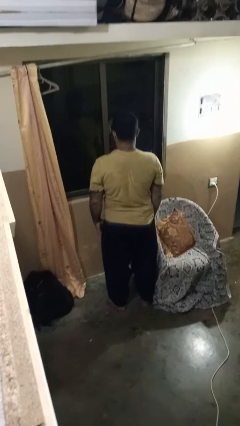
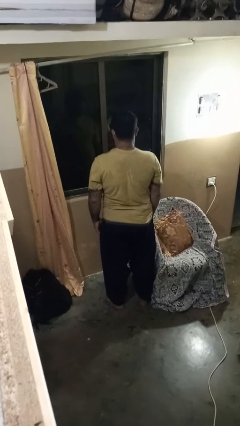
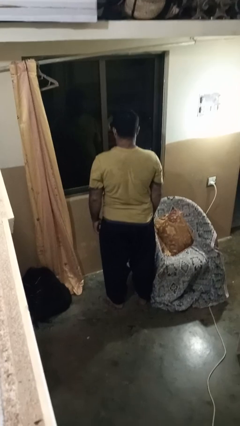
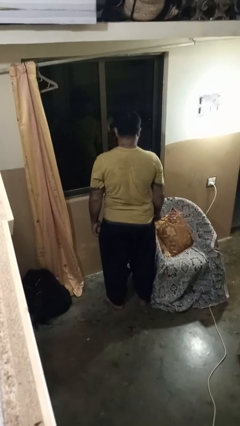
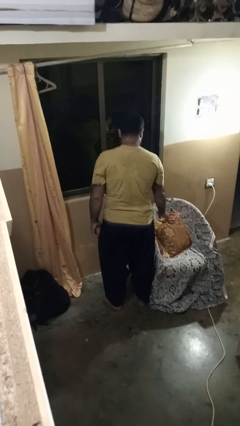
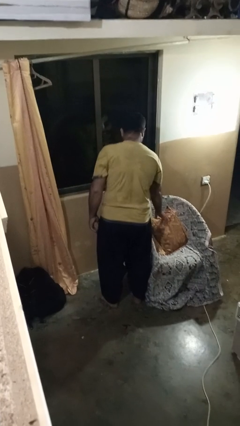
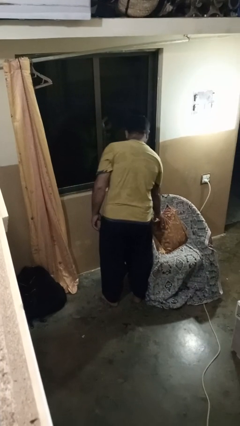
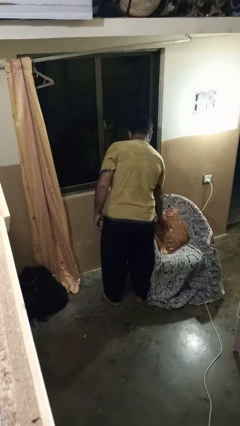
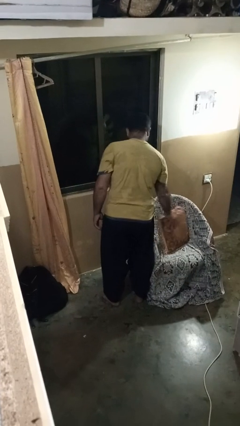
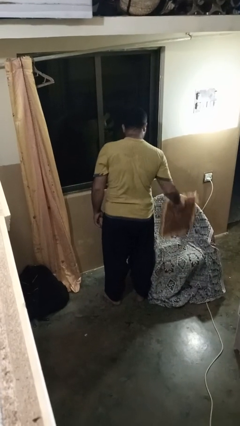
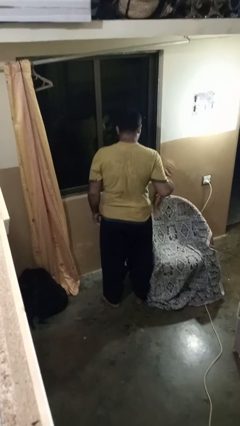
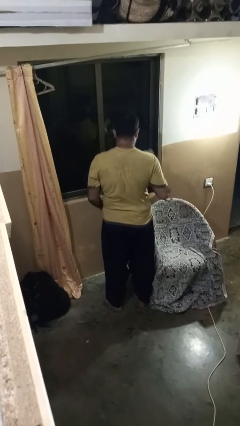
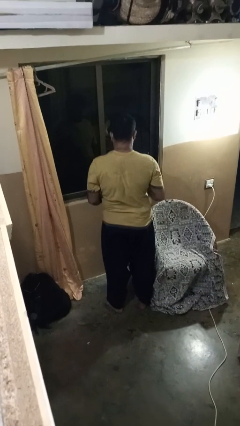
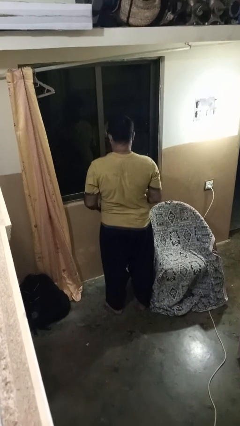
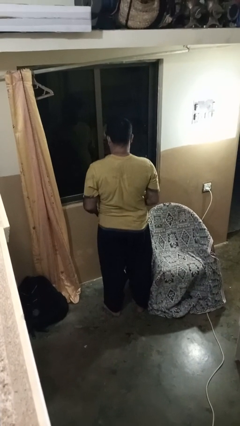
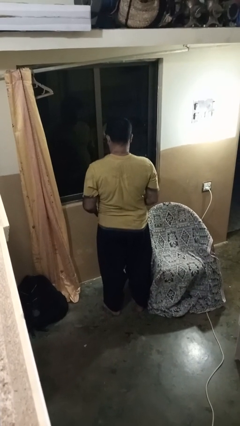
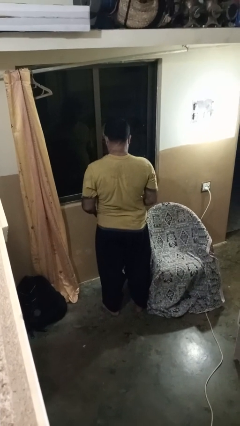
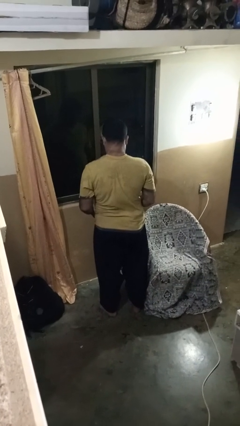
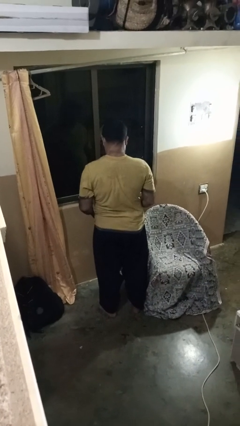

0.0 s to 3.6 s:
person picks up object from couch

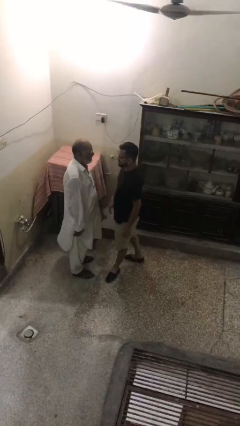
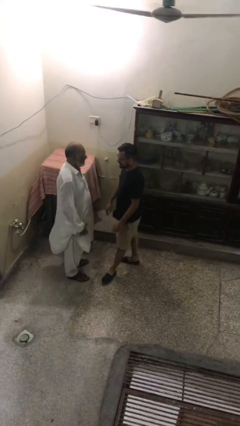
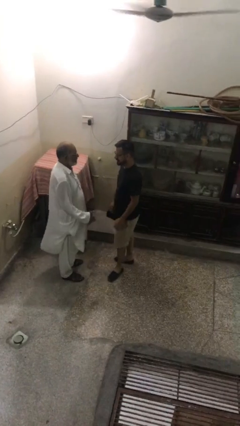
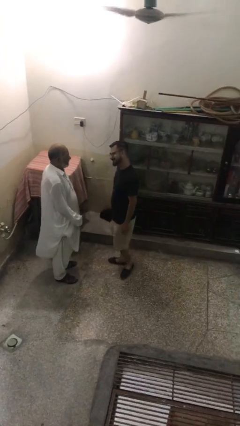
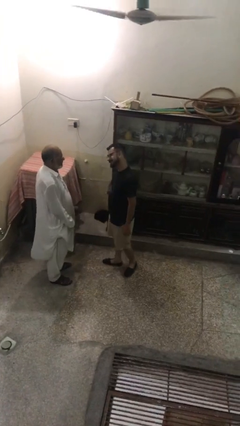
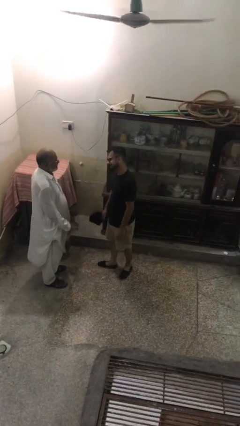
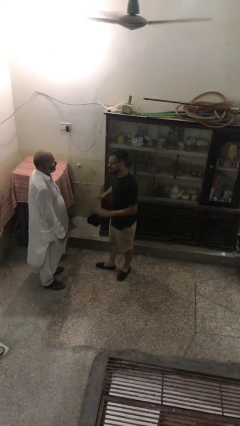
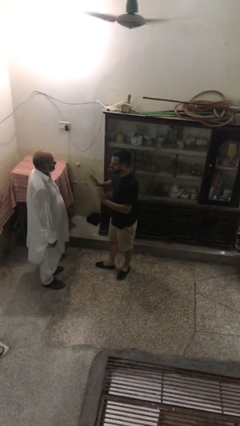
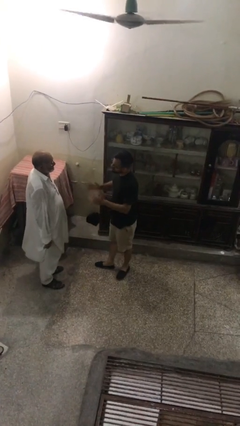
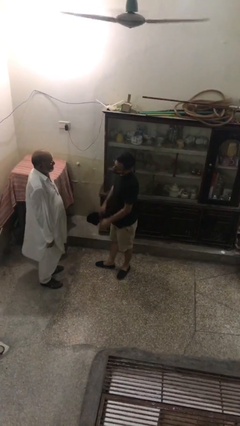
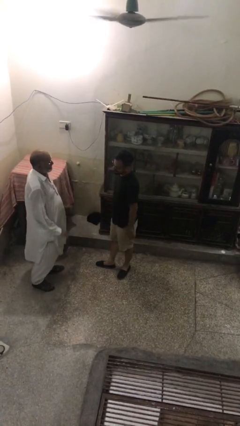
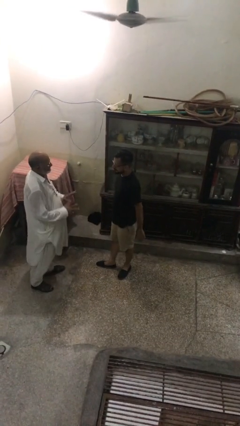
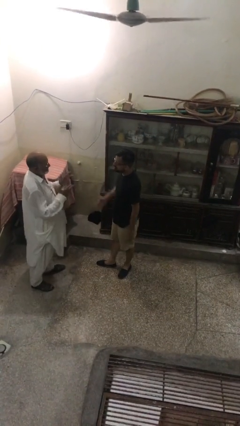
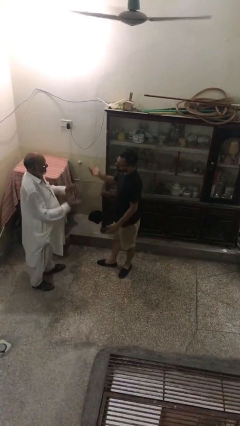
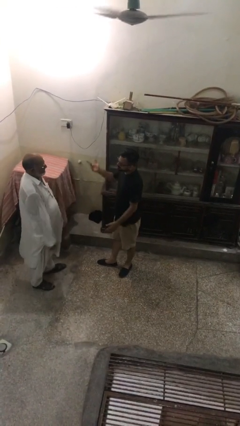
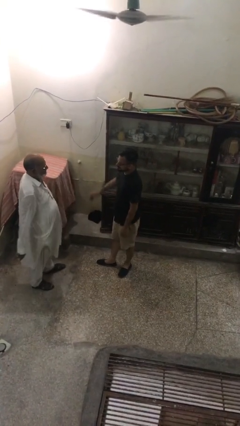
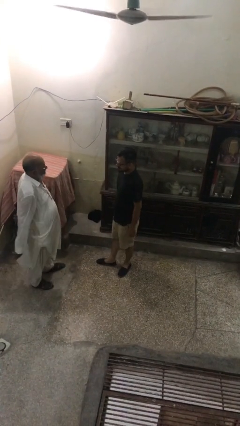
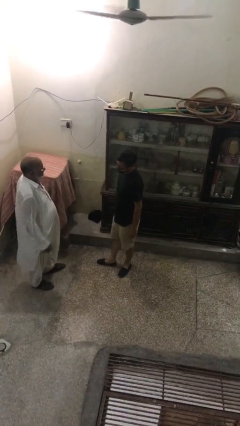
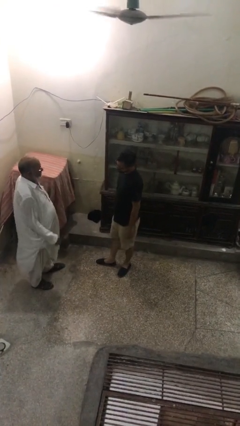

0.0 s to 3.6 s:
person talks to person

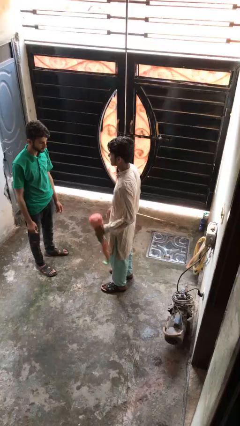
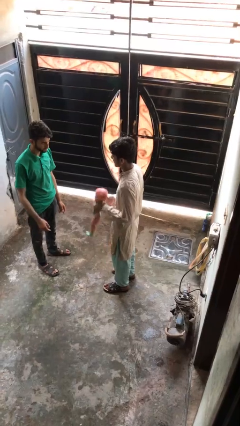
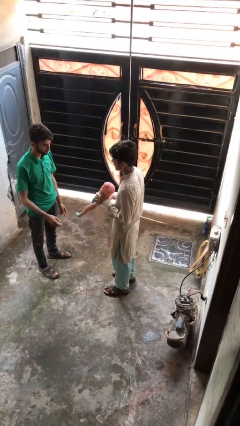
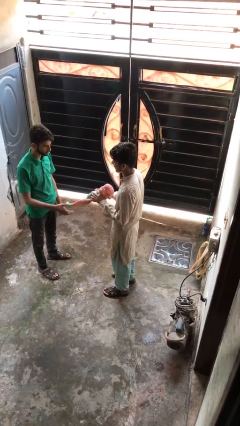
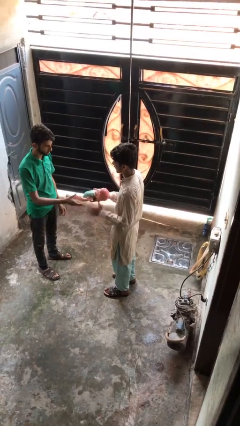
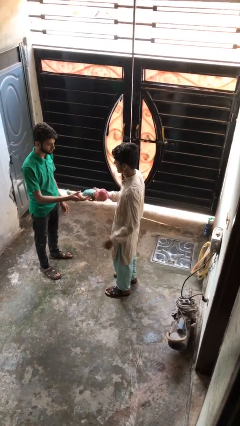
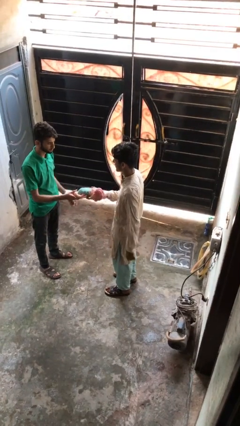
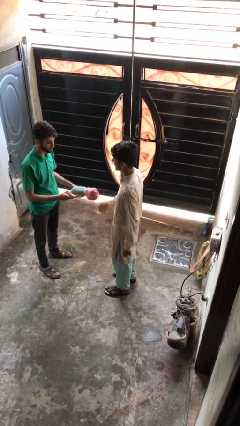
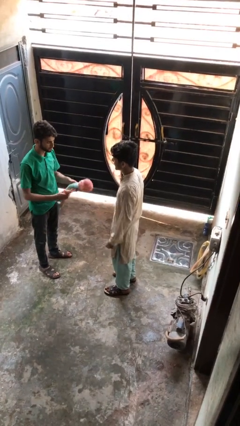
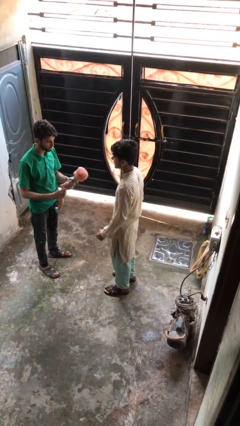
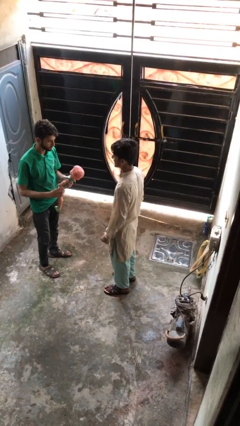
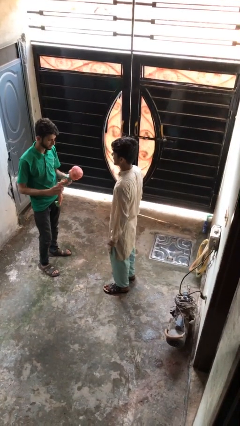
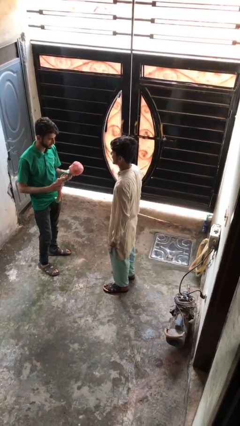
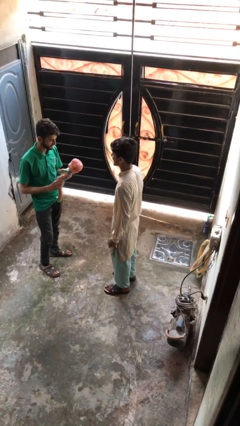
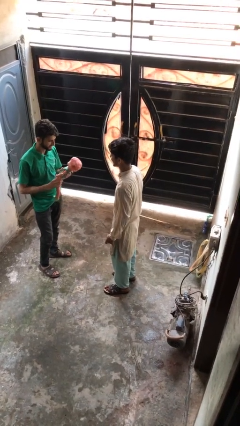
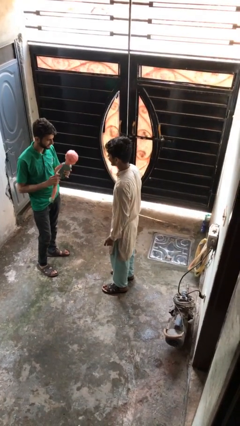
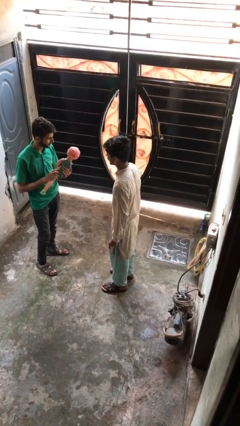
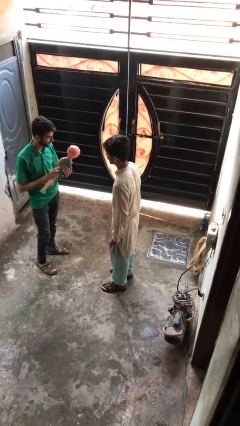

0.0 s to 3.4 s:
person transfers object to person

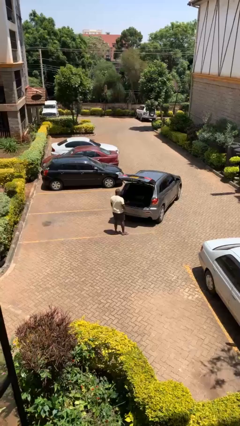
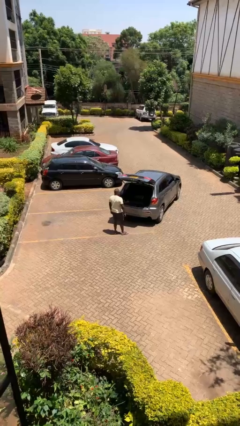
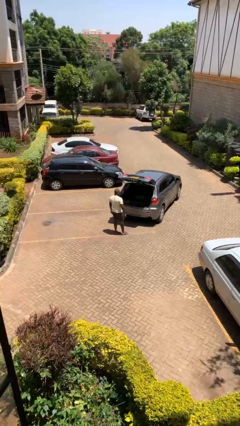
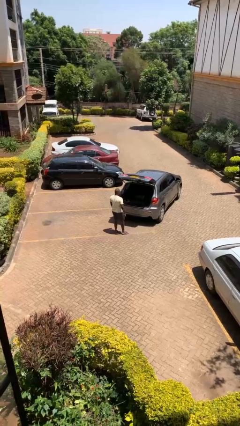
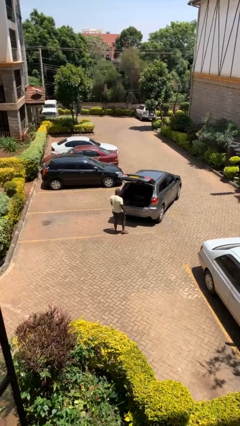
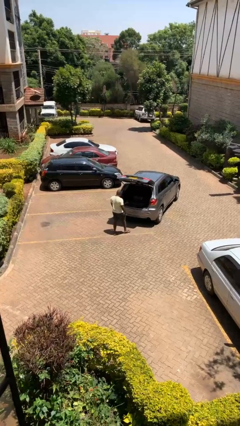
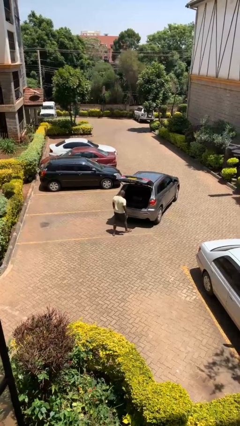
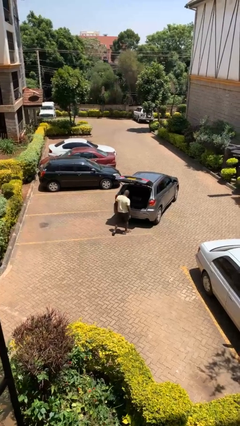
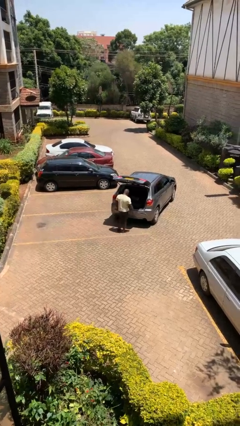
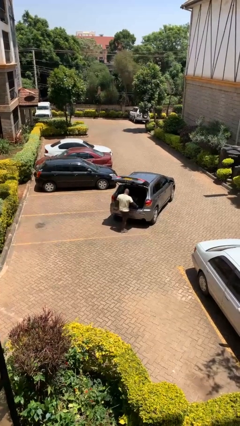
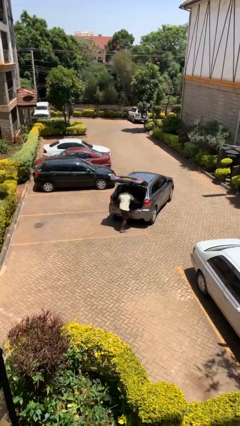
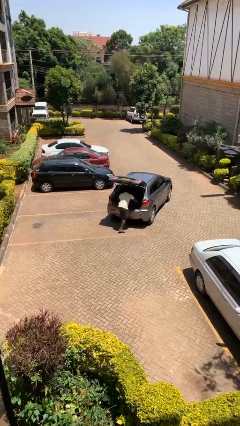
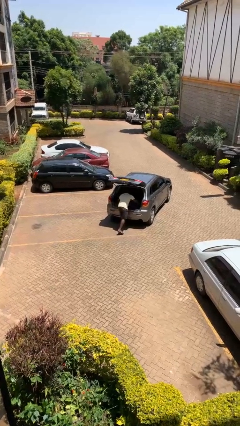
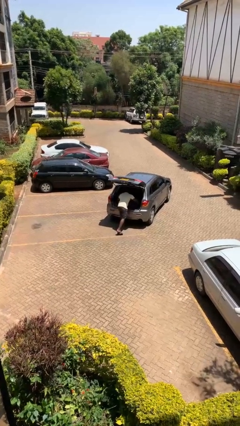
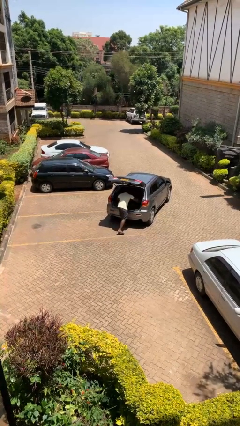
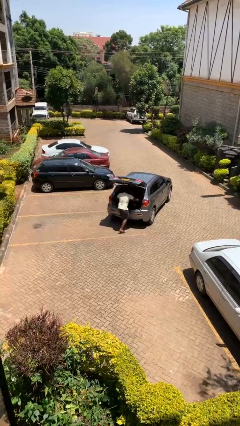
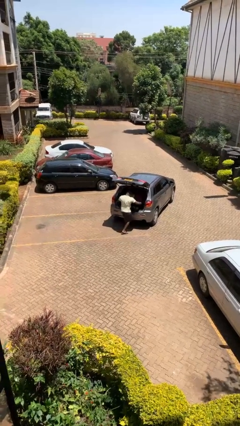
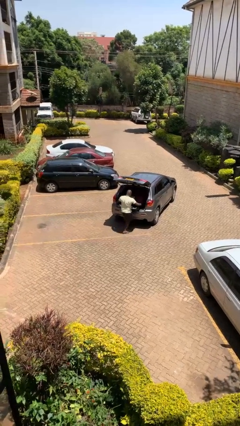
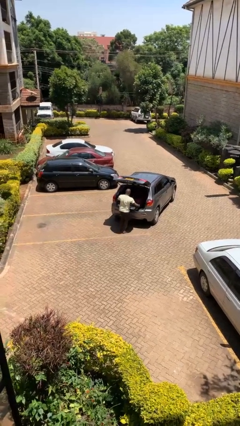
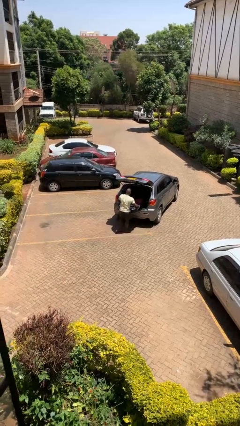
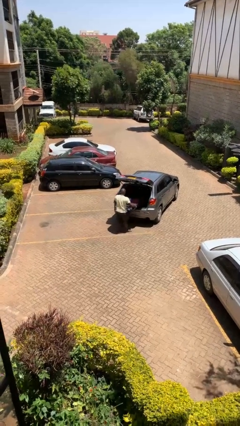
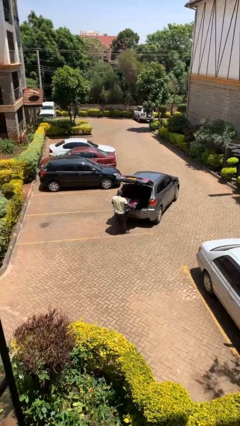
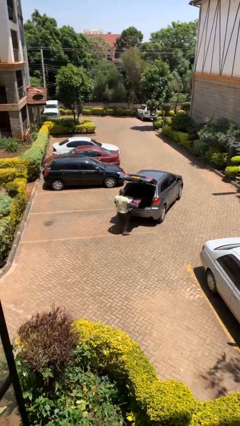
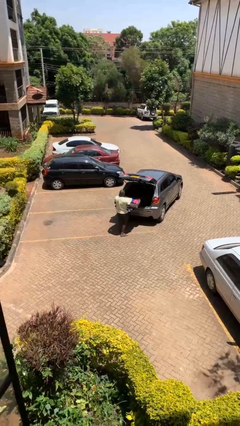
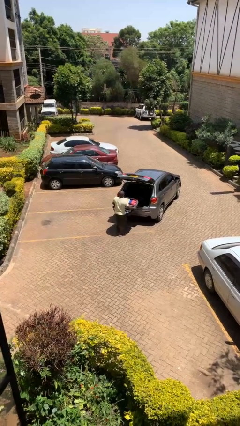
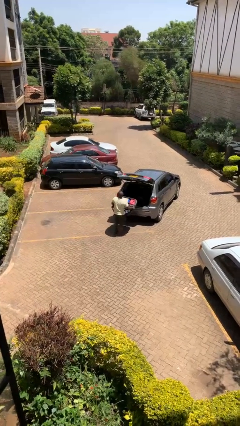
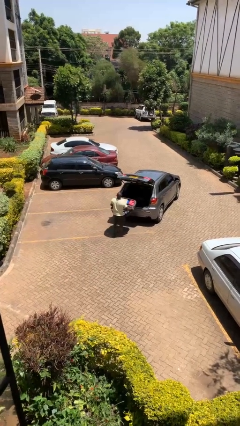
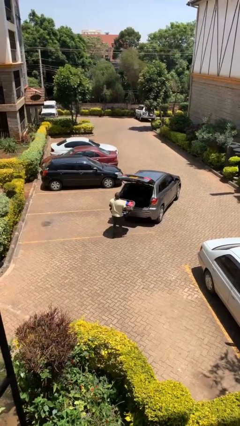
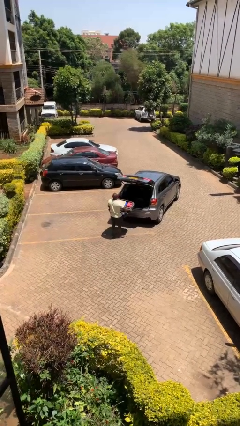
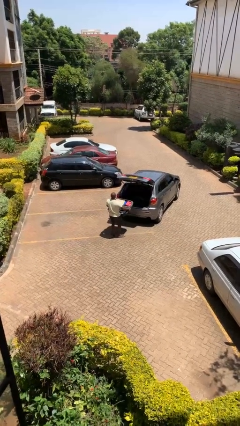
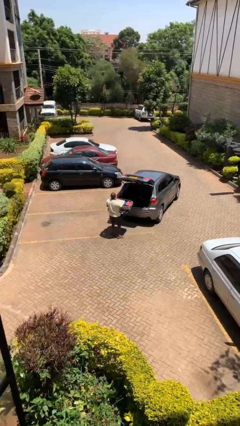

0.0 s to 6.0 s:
person unloads car

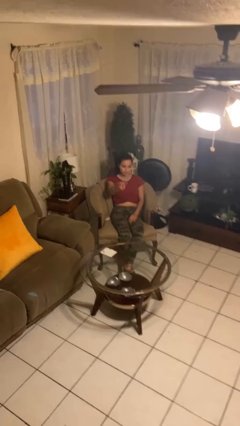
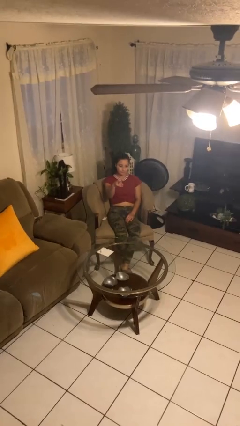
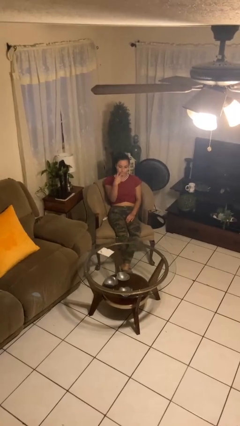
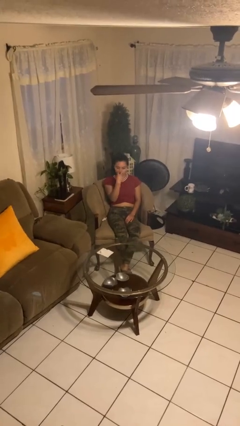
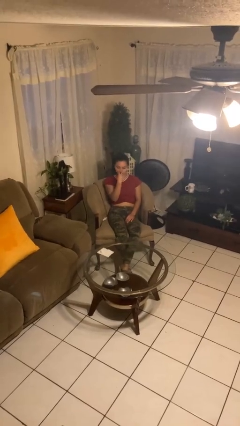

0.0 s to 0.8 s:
person gestures watch closely

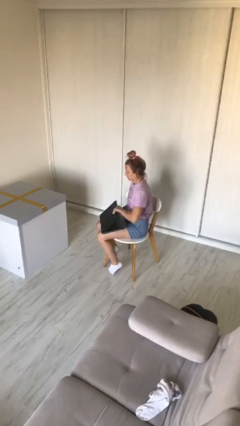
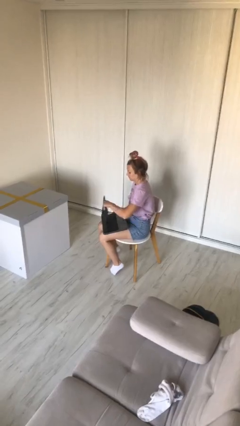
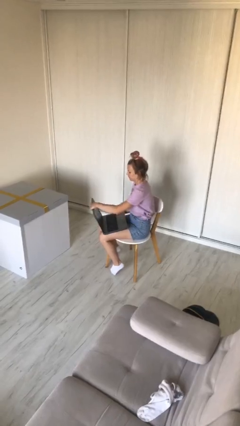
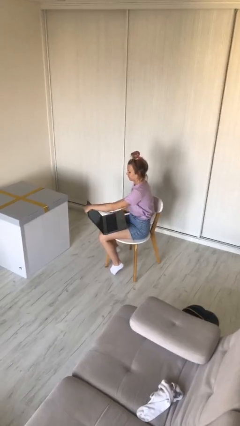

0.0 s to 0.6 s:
person opens laptop
